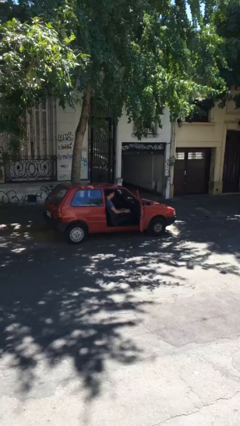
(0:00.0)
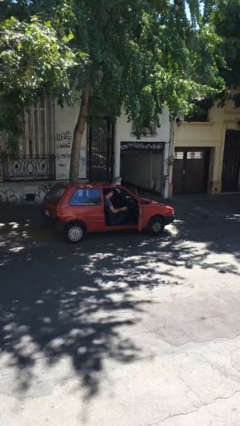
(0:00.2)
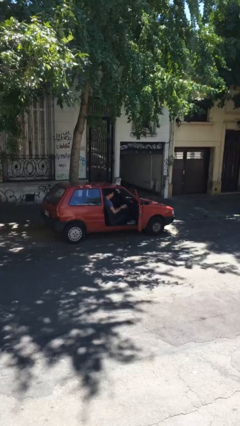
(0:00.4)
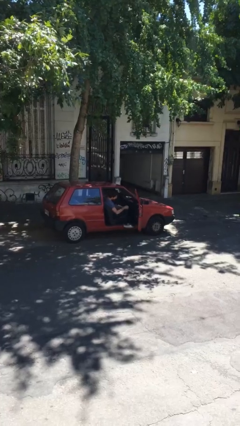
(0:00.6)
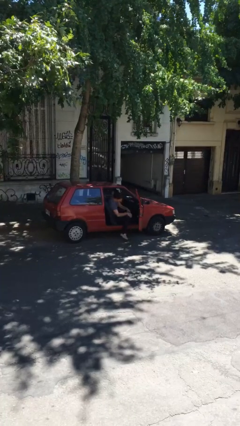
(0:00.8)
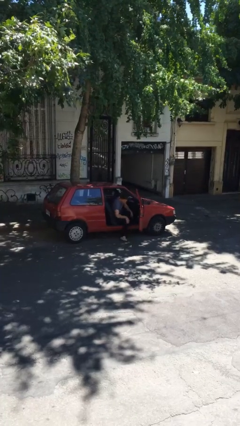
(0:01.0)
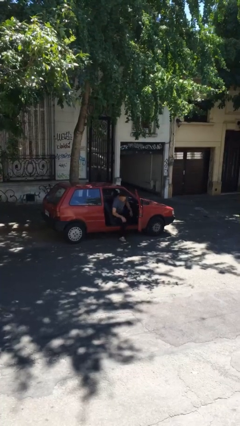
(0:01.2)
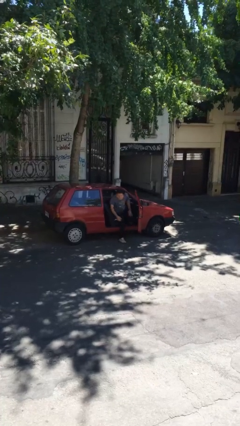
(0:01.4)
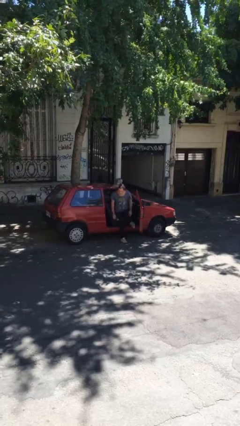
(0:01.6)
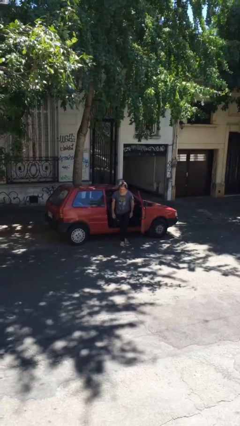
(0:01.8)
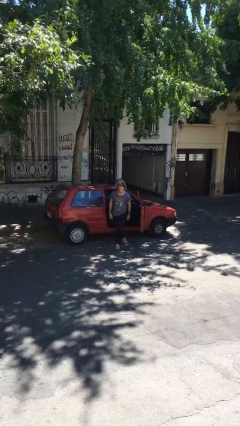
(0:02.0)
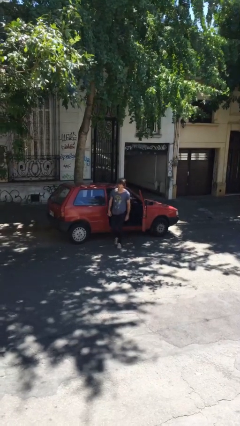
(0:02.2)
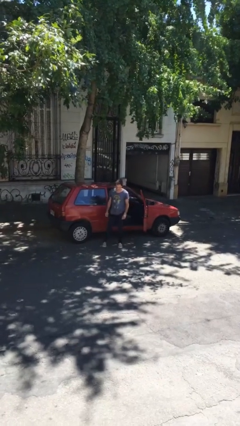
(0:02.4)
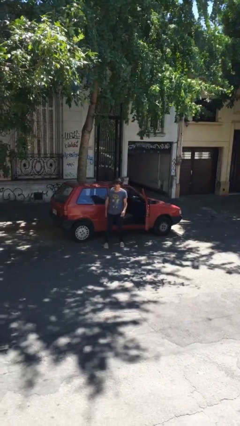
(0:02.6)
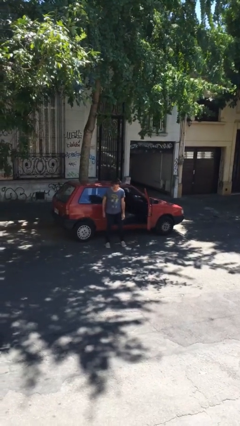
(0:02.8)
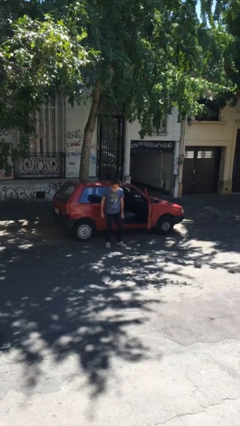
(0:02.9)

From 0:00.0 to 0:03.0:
person exits car

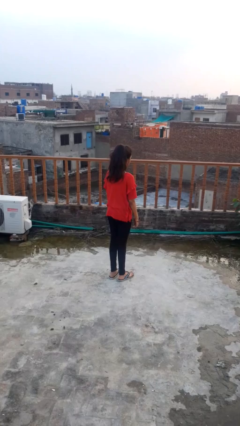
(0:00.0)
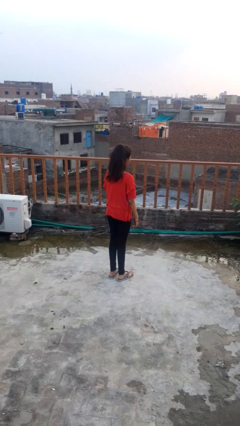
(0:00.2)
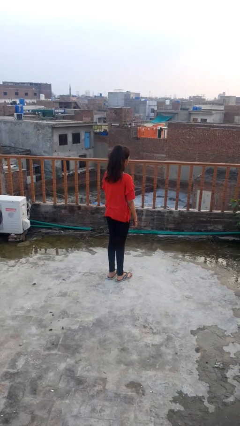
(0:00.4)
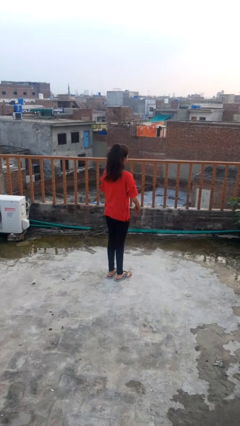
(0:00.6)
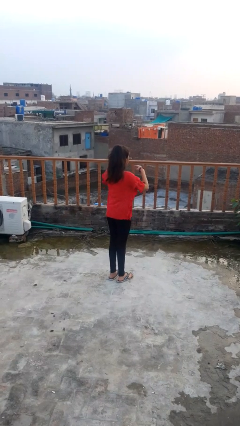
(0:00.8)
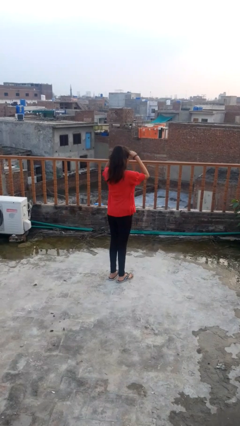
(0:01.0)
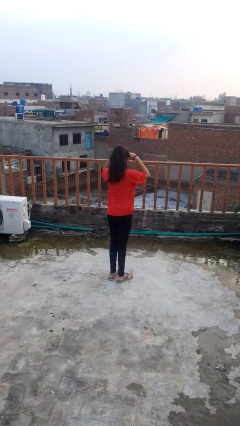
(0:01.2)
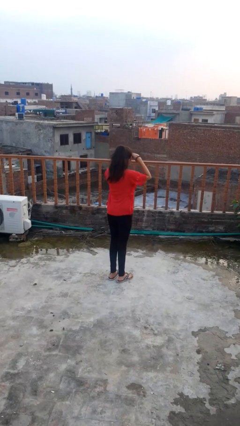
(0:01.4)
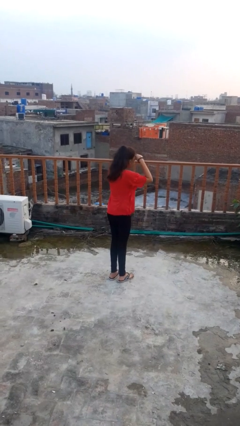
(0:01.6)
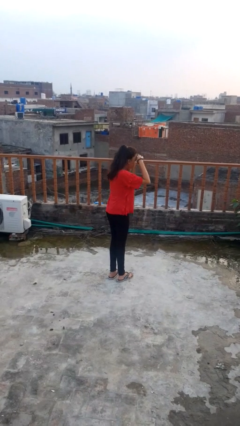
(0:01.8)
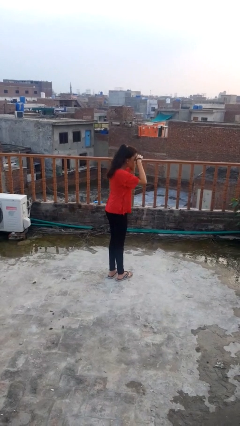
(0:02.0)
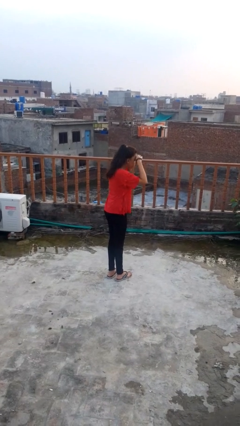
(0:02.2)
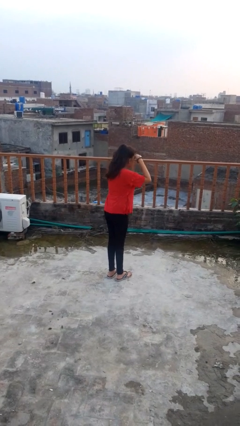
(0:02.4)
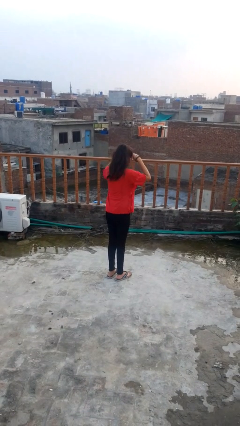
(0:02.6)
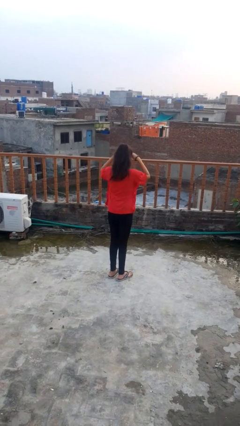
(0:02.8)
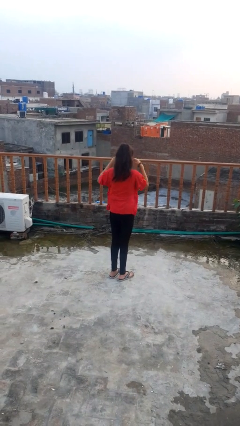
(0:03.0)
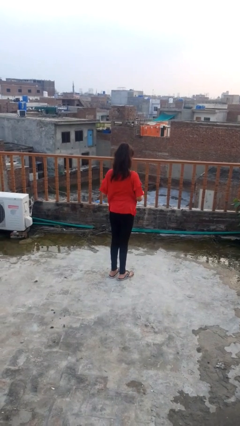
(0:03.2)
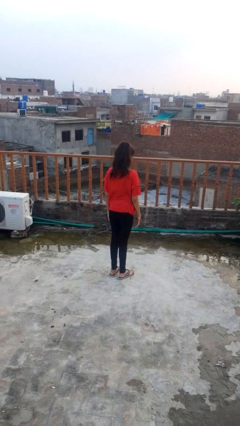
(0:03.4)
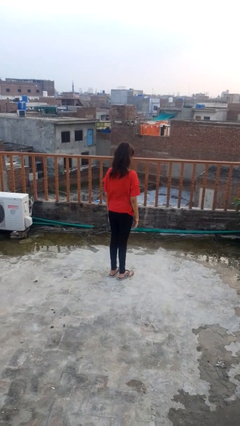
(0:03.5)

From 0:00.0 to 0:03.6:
person shades eyes

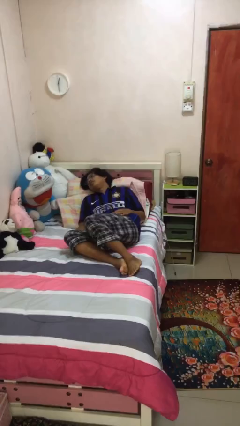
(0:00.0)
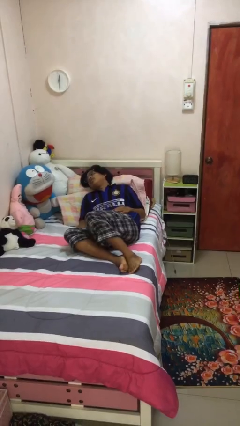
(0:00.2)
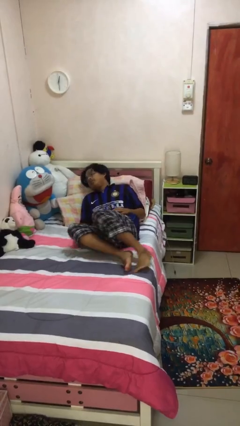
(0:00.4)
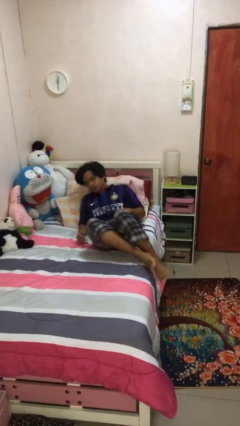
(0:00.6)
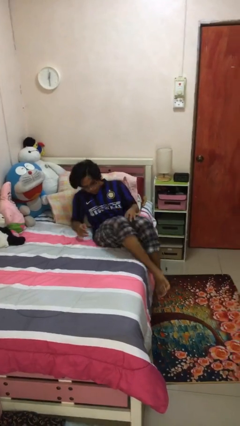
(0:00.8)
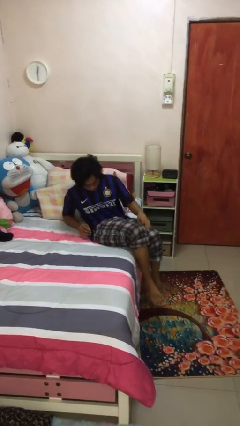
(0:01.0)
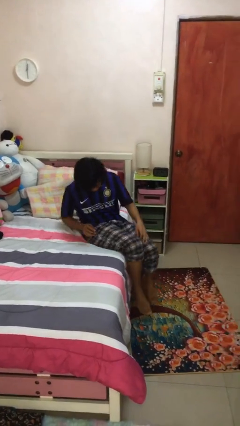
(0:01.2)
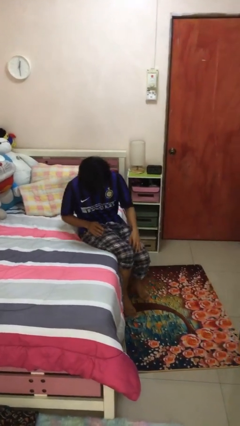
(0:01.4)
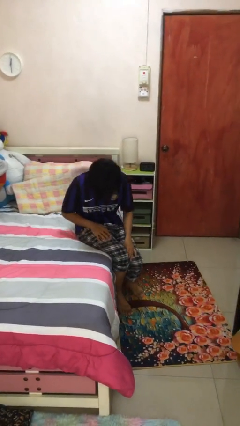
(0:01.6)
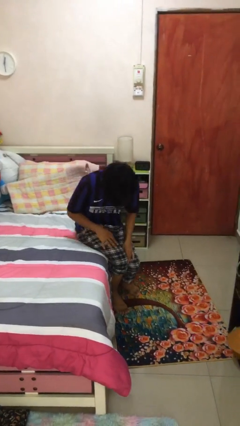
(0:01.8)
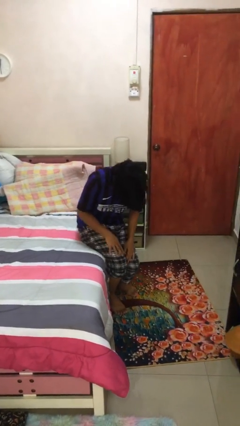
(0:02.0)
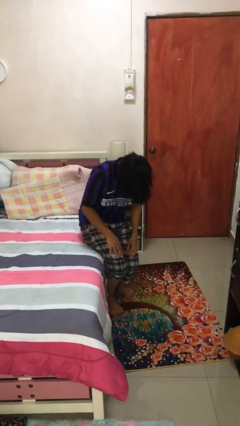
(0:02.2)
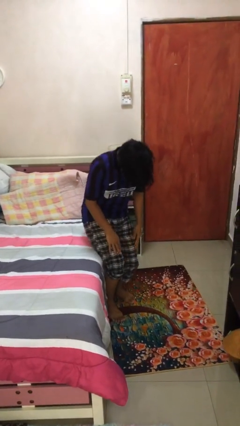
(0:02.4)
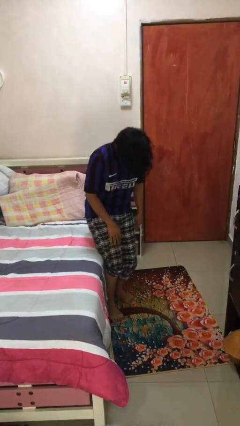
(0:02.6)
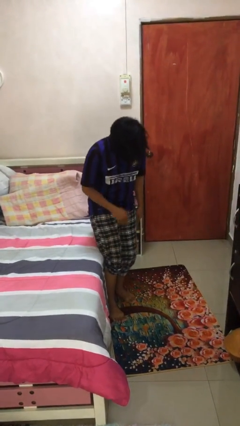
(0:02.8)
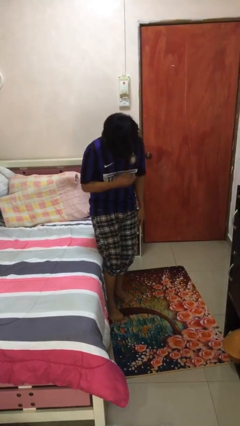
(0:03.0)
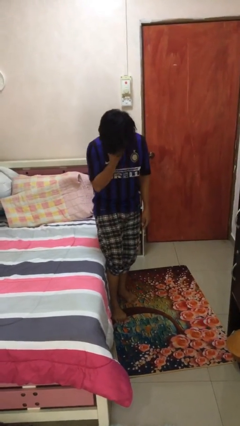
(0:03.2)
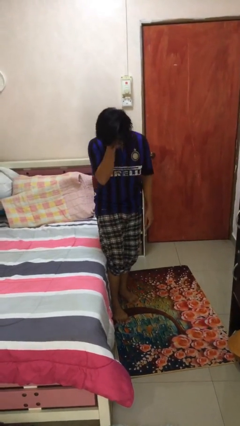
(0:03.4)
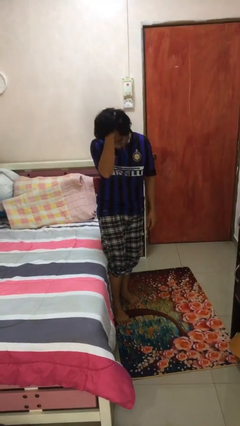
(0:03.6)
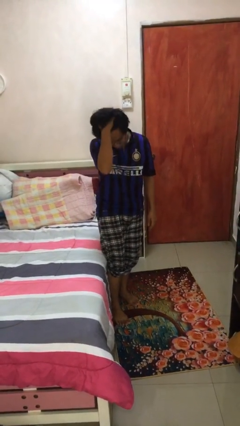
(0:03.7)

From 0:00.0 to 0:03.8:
person stands up

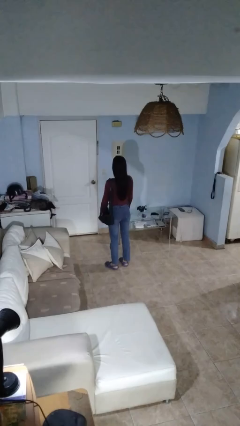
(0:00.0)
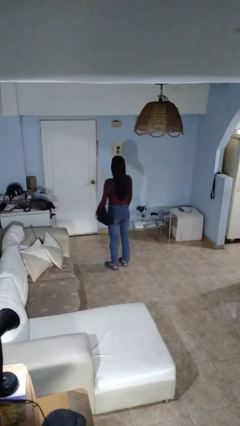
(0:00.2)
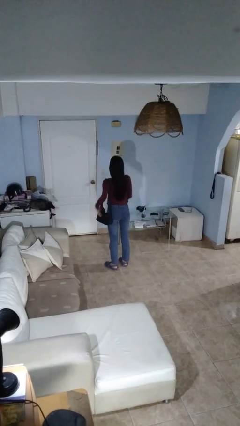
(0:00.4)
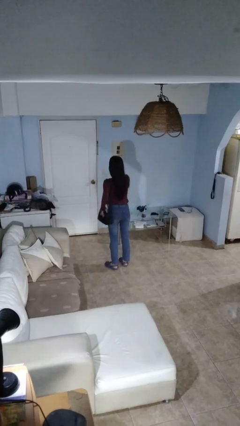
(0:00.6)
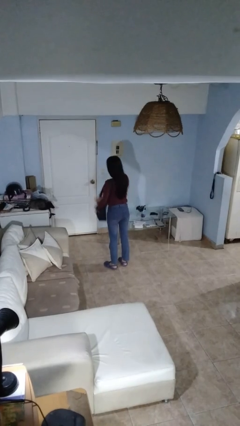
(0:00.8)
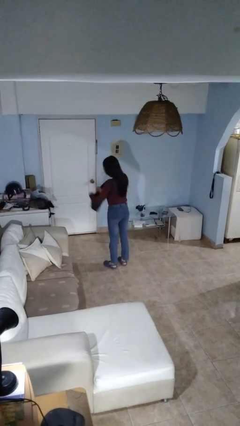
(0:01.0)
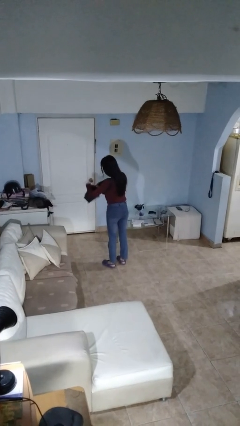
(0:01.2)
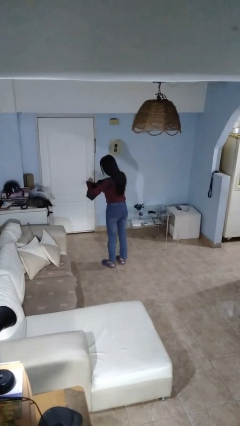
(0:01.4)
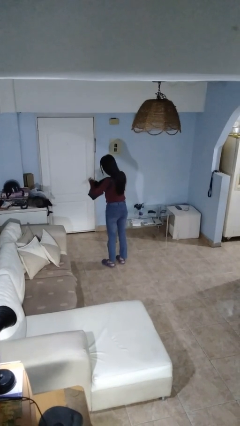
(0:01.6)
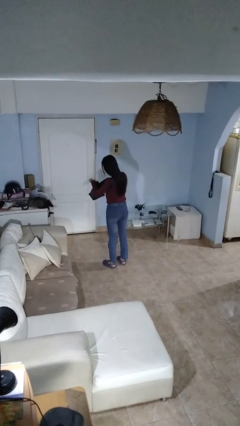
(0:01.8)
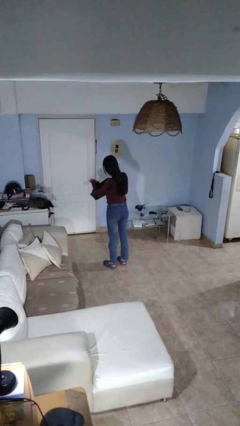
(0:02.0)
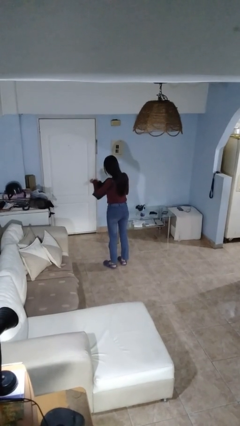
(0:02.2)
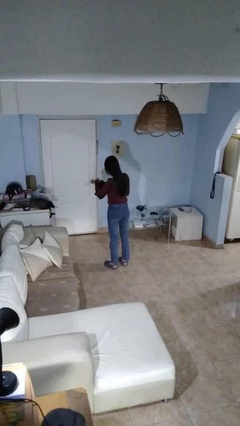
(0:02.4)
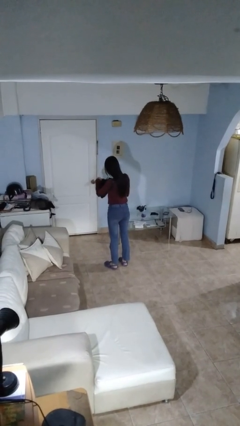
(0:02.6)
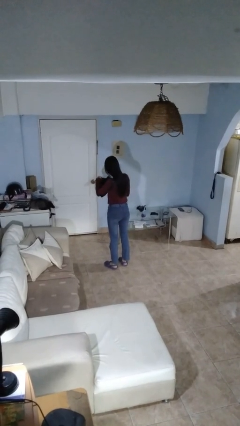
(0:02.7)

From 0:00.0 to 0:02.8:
person searches in purse

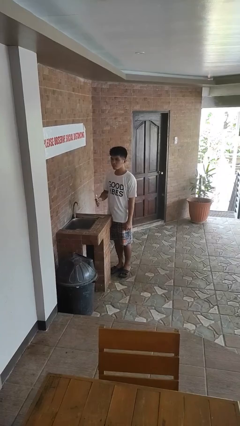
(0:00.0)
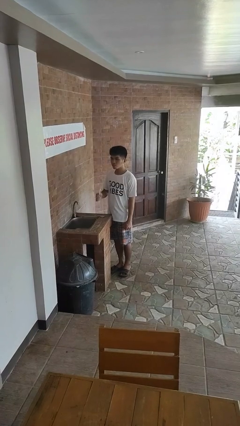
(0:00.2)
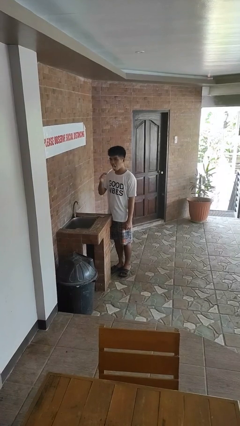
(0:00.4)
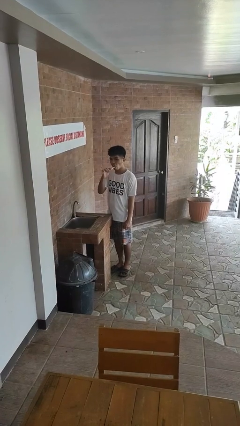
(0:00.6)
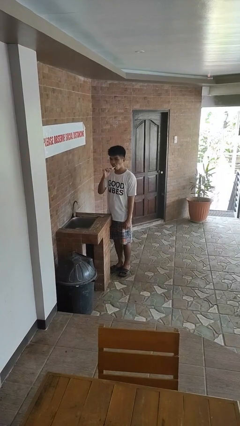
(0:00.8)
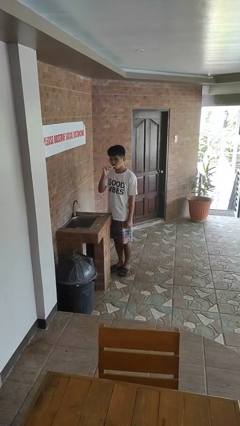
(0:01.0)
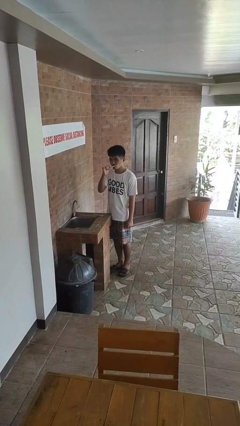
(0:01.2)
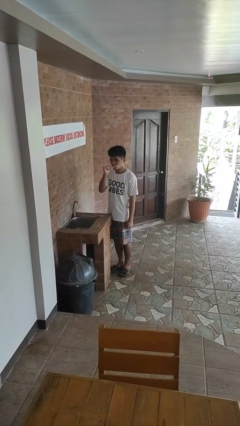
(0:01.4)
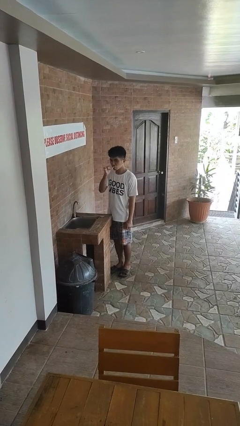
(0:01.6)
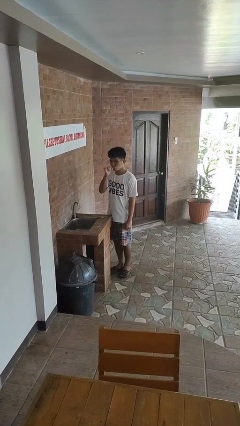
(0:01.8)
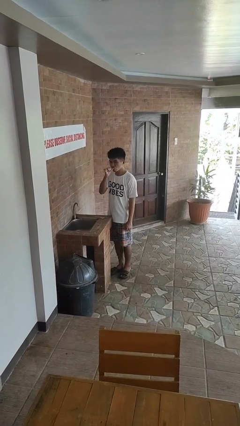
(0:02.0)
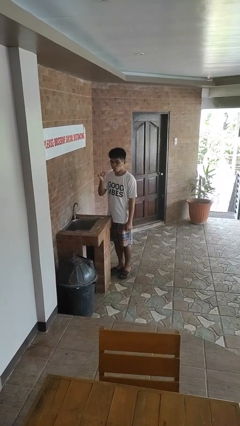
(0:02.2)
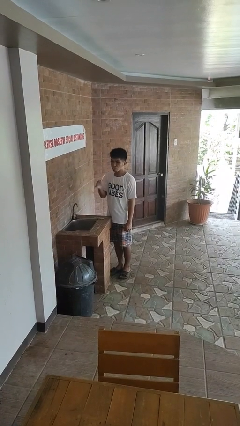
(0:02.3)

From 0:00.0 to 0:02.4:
person brushes teeth

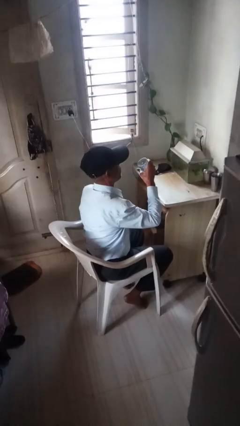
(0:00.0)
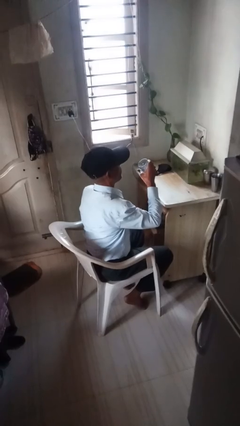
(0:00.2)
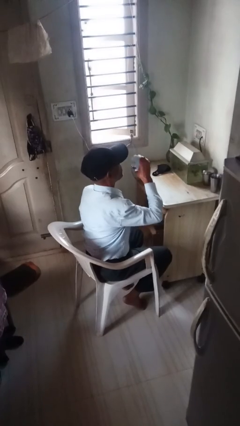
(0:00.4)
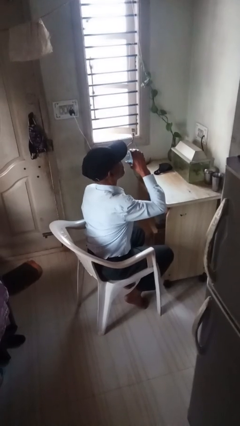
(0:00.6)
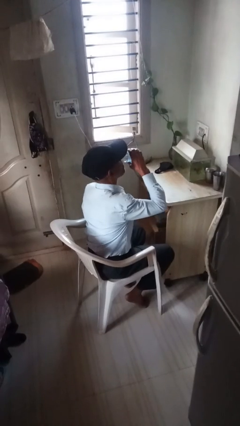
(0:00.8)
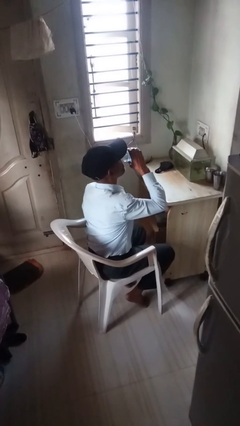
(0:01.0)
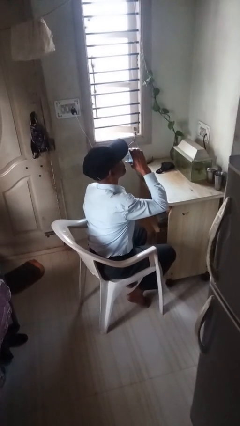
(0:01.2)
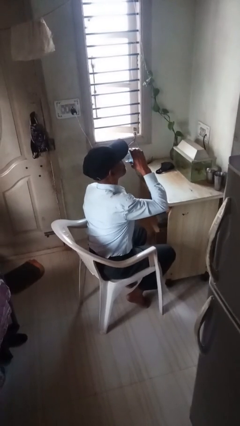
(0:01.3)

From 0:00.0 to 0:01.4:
person drinks from shotglass

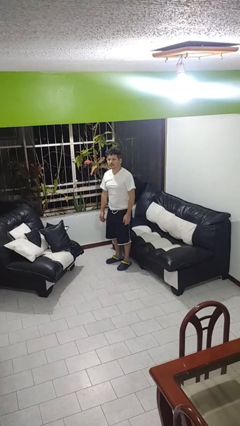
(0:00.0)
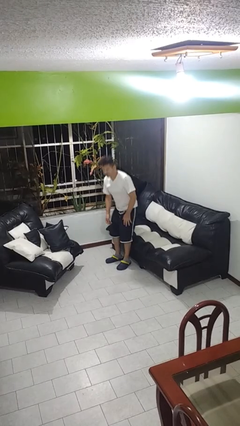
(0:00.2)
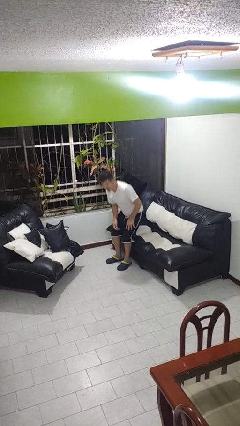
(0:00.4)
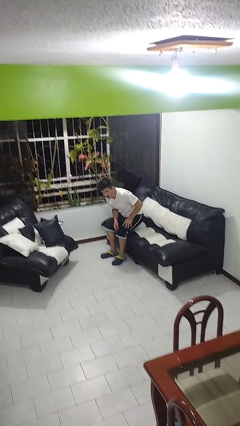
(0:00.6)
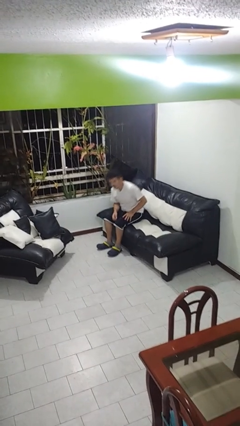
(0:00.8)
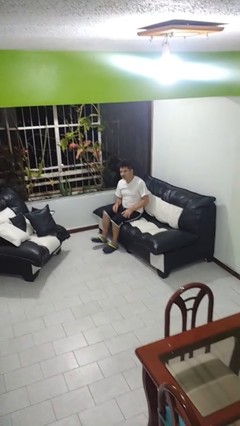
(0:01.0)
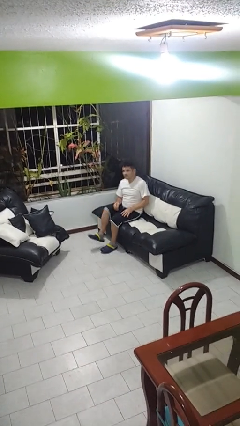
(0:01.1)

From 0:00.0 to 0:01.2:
person lies down on couch